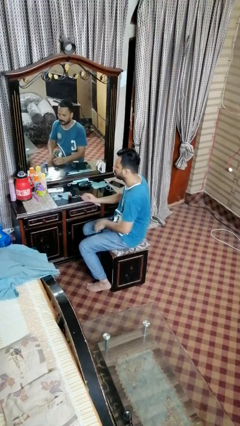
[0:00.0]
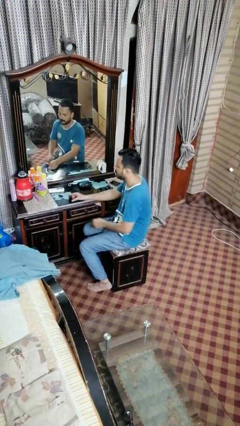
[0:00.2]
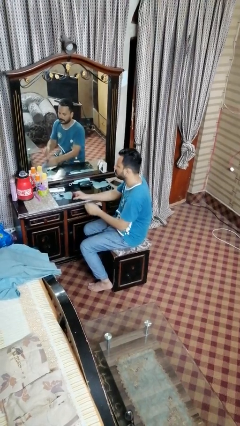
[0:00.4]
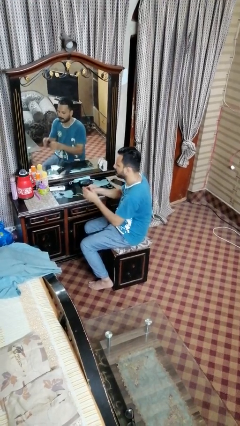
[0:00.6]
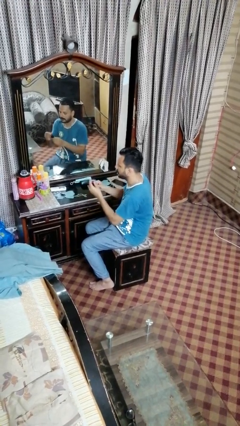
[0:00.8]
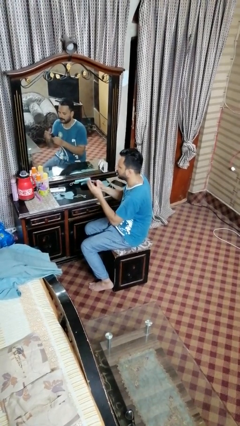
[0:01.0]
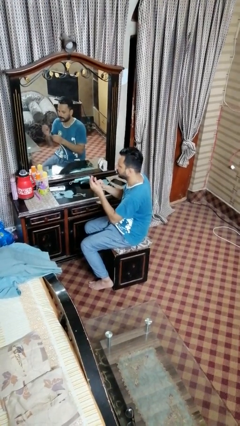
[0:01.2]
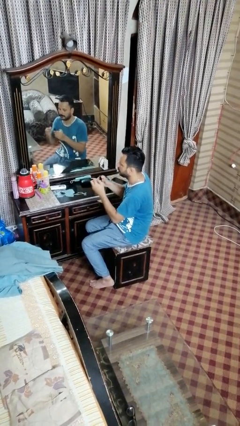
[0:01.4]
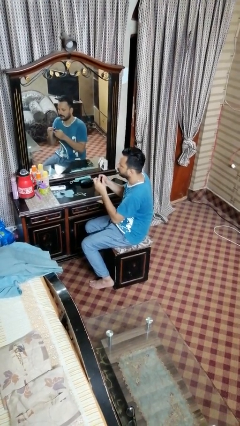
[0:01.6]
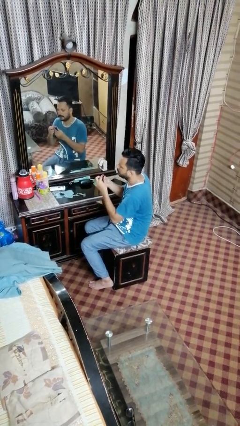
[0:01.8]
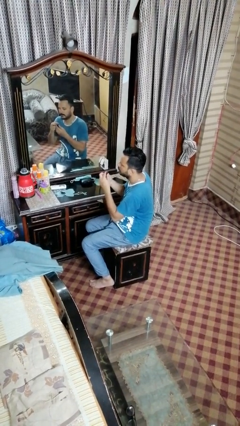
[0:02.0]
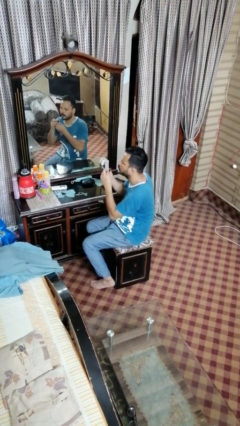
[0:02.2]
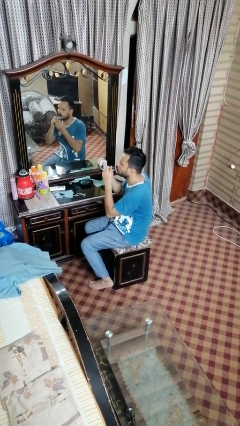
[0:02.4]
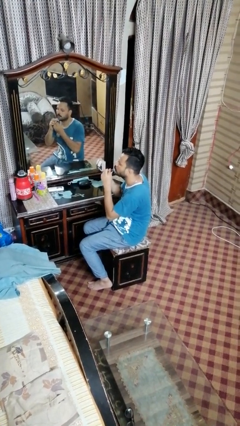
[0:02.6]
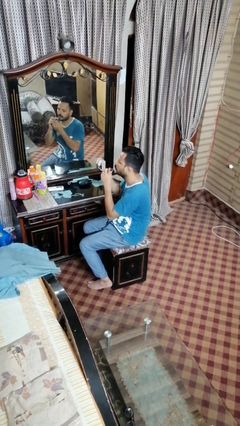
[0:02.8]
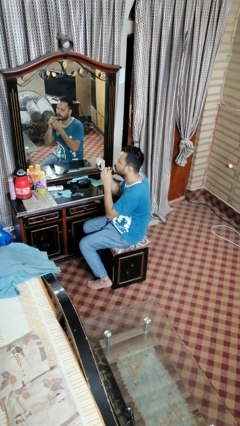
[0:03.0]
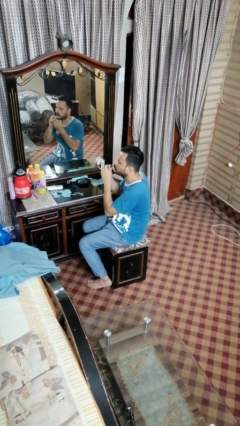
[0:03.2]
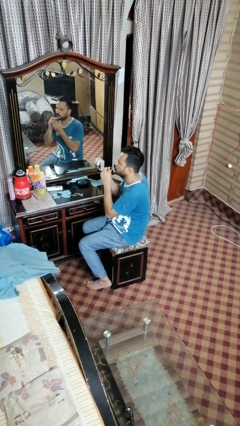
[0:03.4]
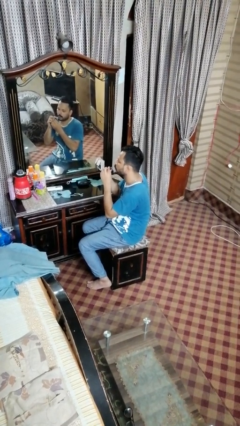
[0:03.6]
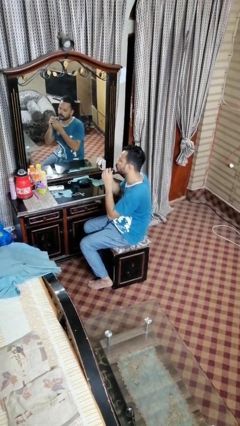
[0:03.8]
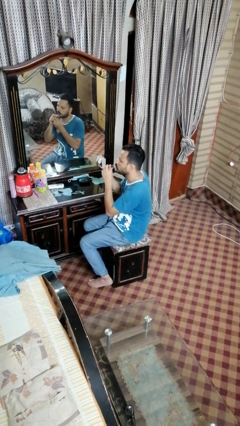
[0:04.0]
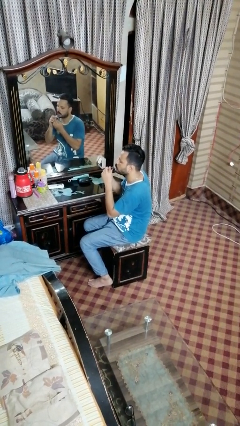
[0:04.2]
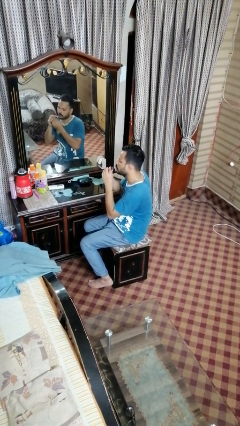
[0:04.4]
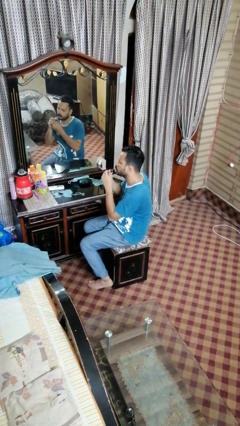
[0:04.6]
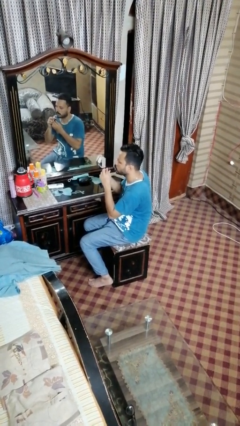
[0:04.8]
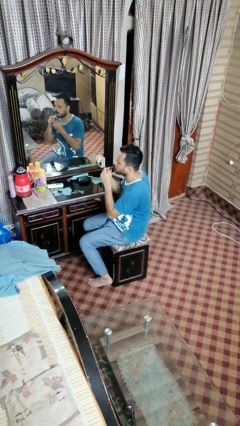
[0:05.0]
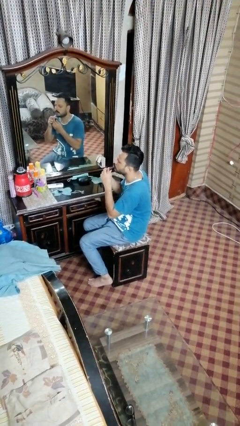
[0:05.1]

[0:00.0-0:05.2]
person applies lip makeup

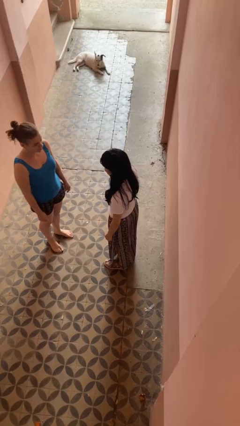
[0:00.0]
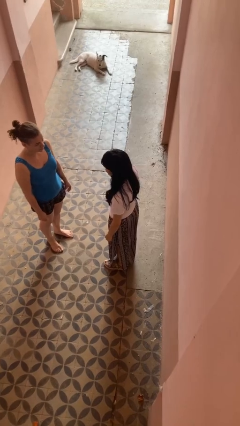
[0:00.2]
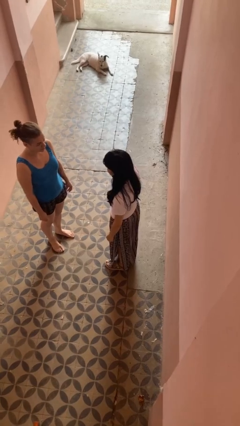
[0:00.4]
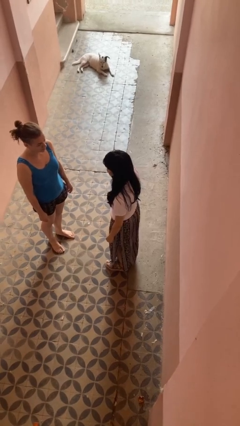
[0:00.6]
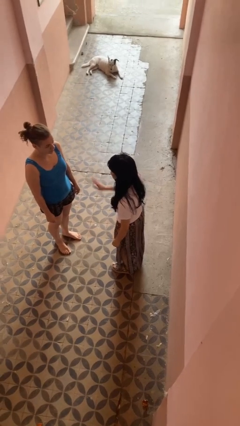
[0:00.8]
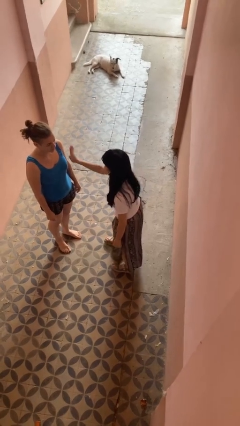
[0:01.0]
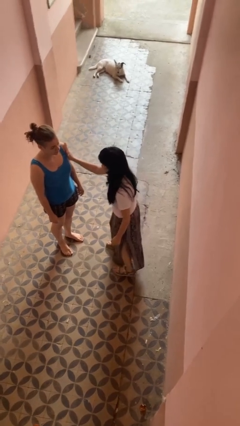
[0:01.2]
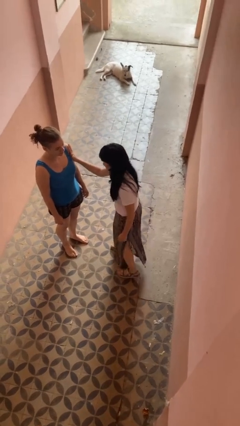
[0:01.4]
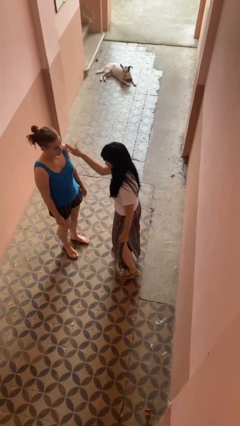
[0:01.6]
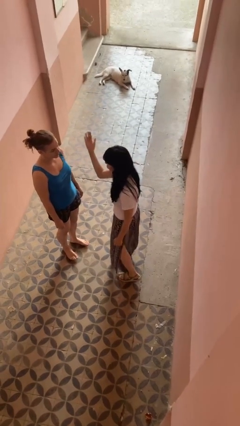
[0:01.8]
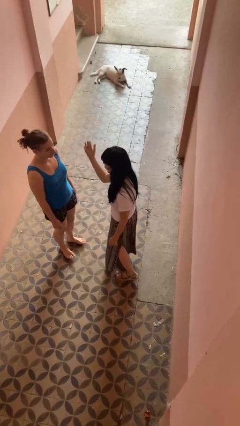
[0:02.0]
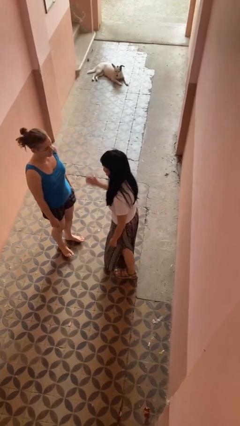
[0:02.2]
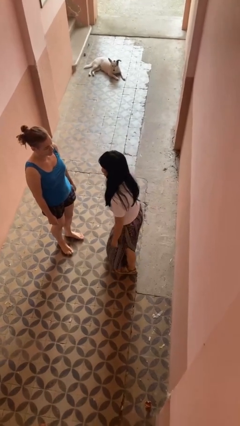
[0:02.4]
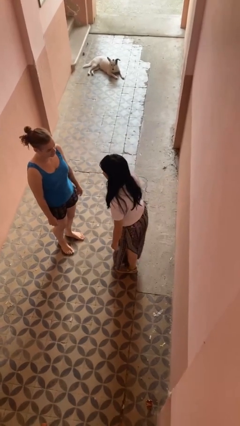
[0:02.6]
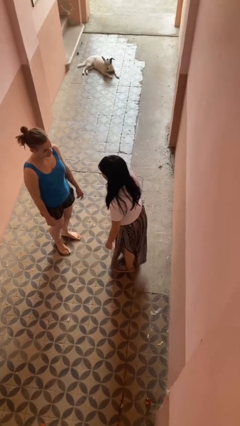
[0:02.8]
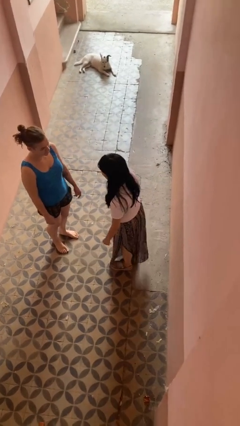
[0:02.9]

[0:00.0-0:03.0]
person shoves person

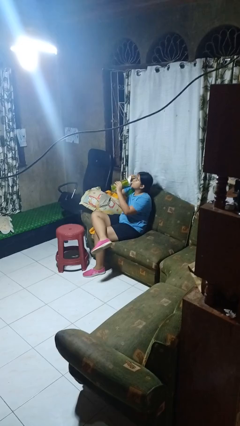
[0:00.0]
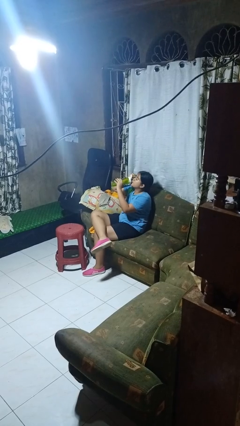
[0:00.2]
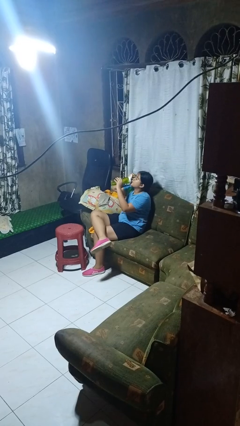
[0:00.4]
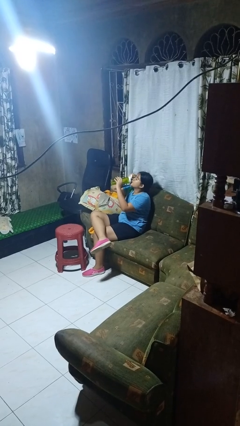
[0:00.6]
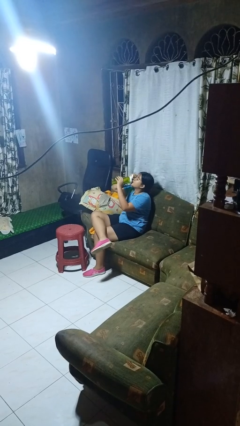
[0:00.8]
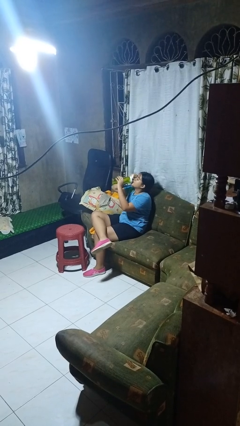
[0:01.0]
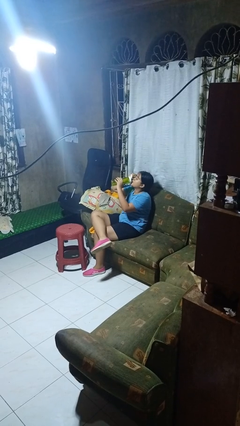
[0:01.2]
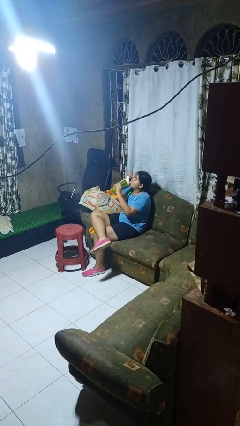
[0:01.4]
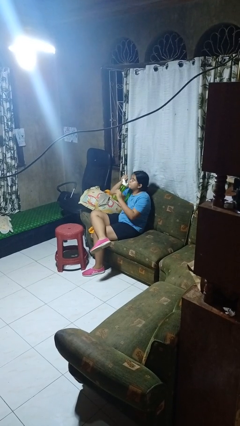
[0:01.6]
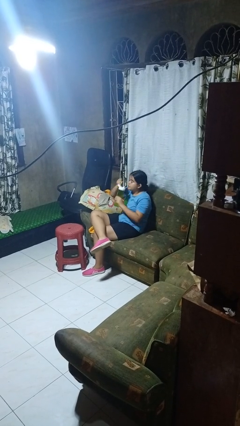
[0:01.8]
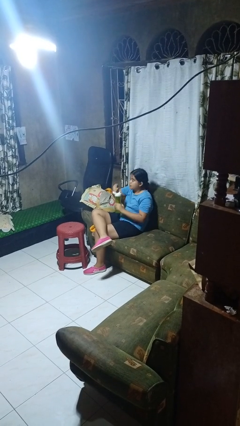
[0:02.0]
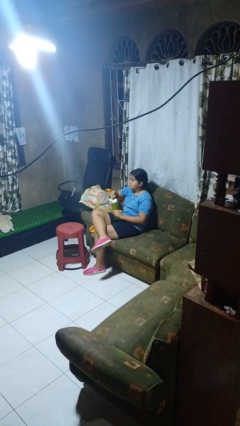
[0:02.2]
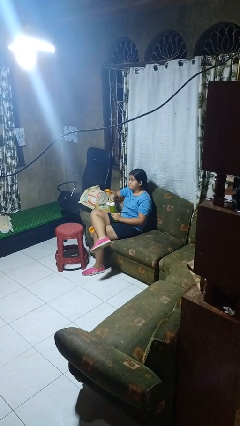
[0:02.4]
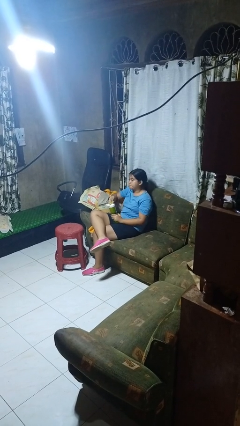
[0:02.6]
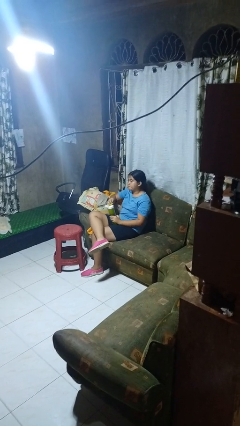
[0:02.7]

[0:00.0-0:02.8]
person drinks from bottle

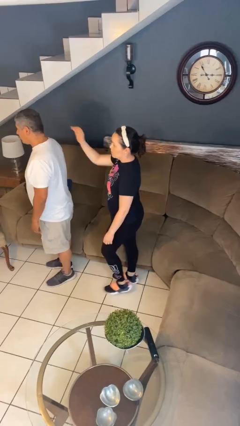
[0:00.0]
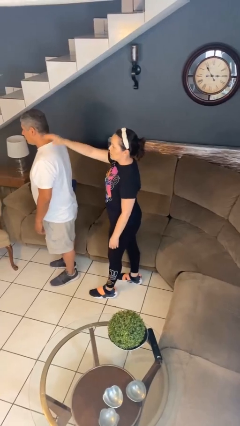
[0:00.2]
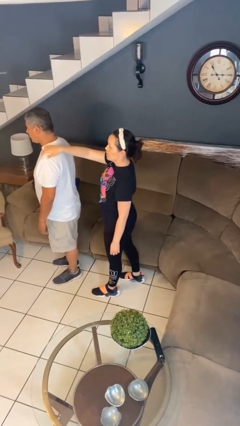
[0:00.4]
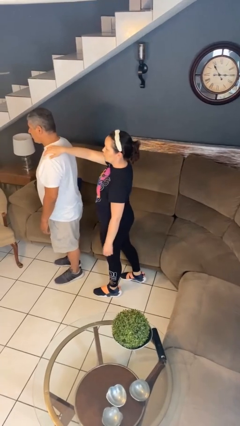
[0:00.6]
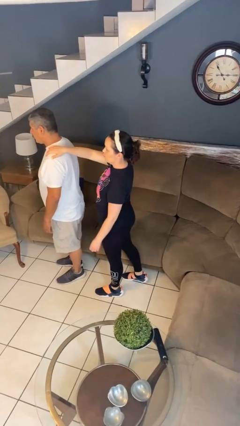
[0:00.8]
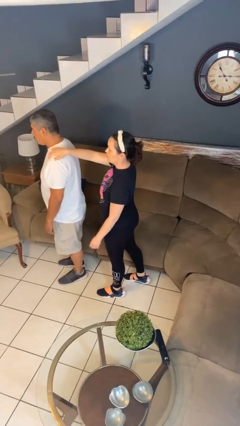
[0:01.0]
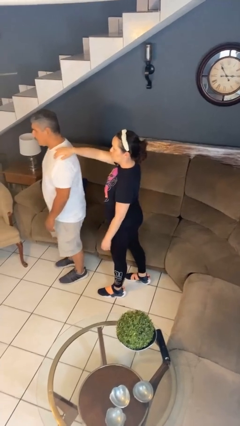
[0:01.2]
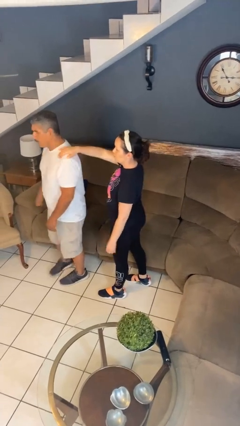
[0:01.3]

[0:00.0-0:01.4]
person grabs person by shoulder

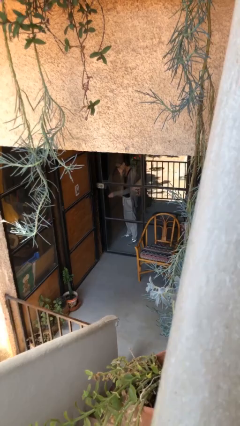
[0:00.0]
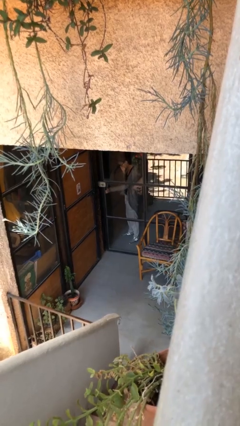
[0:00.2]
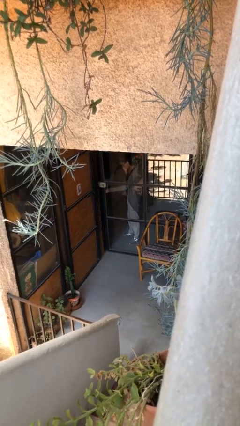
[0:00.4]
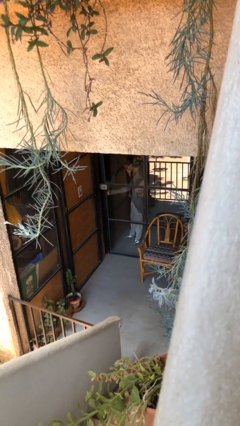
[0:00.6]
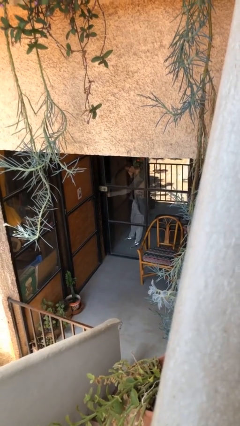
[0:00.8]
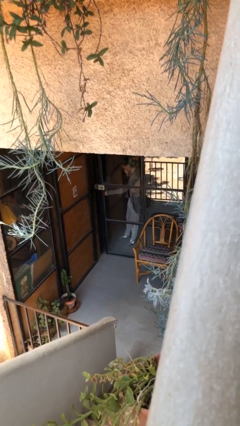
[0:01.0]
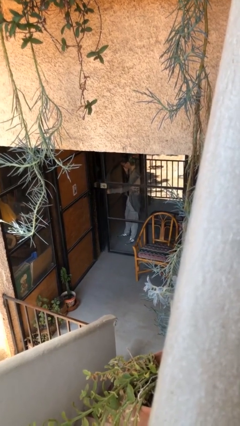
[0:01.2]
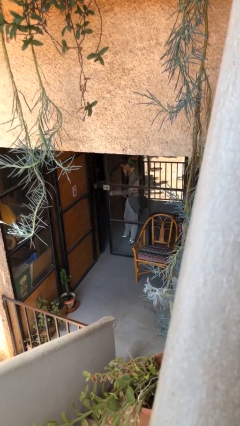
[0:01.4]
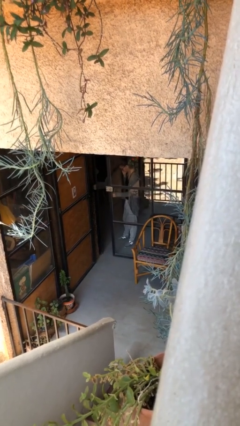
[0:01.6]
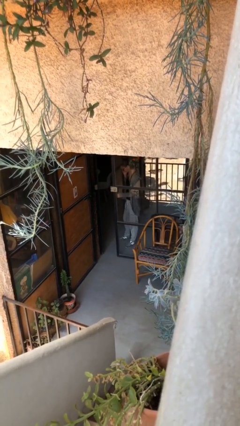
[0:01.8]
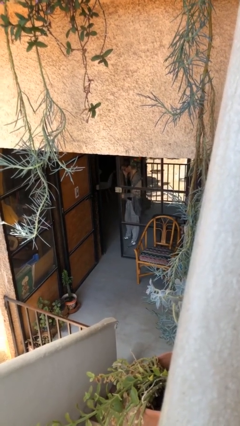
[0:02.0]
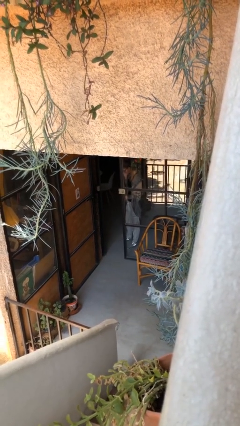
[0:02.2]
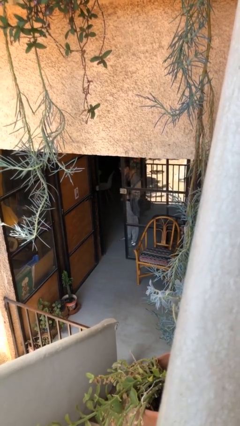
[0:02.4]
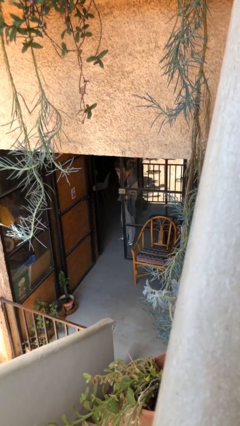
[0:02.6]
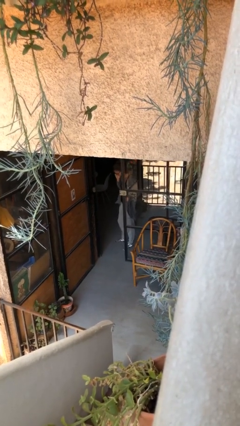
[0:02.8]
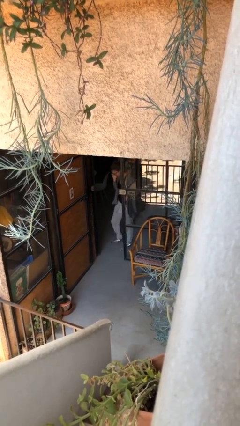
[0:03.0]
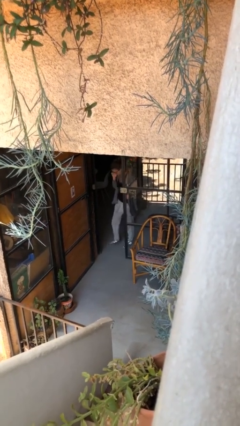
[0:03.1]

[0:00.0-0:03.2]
person opens facility door

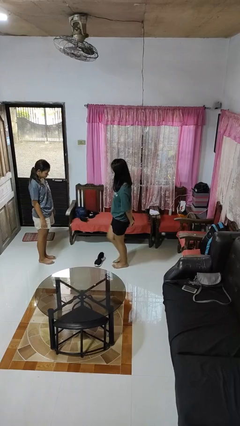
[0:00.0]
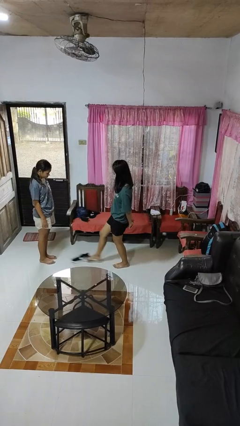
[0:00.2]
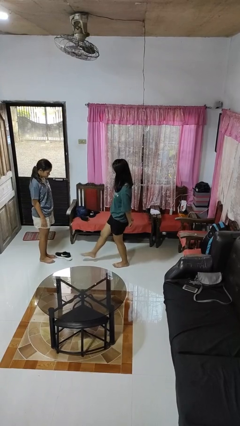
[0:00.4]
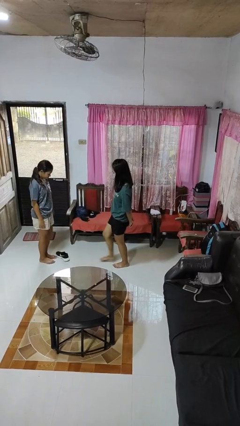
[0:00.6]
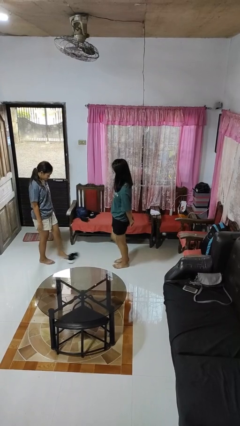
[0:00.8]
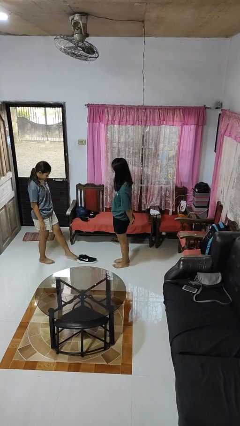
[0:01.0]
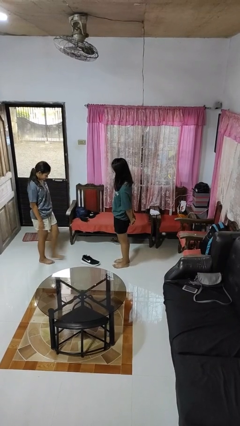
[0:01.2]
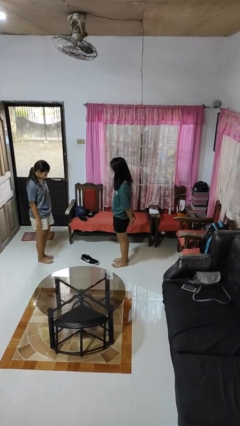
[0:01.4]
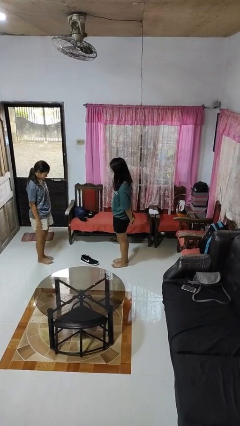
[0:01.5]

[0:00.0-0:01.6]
person kicks object to person
